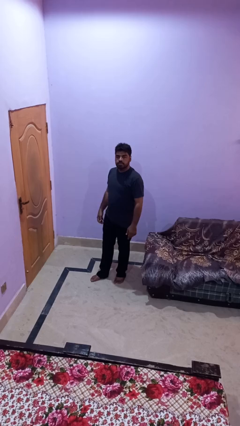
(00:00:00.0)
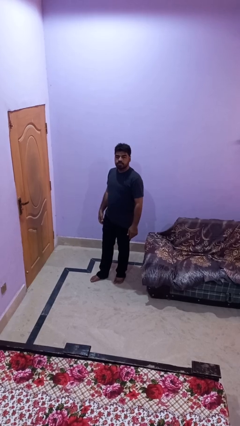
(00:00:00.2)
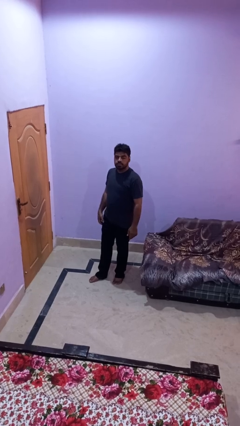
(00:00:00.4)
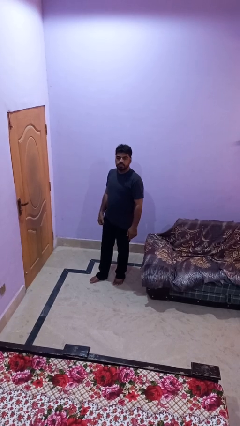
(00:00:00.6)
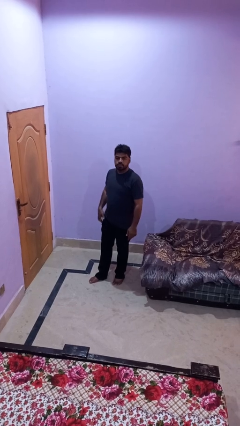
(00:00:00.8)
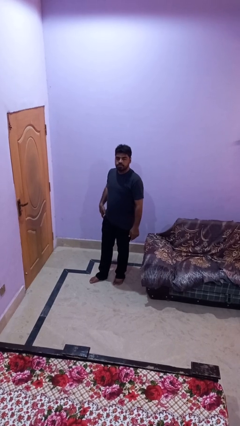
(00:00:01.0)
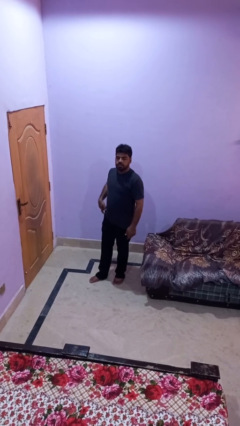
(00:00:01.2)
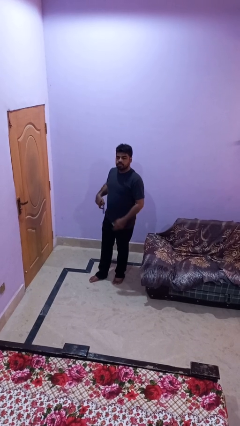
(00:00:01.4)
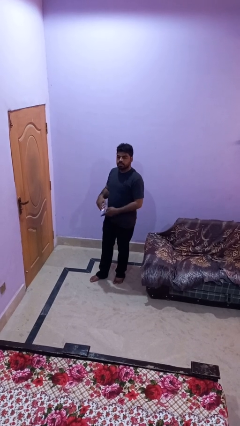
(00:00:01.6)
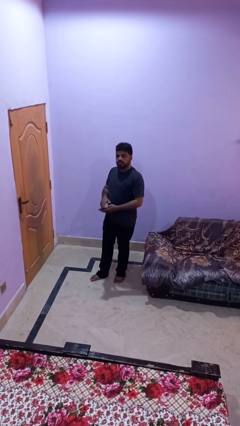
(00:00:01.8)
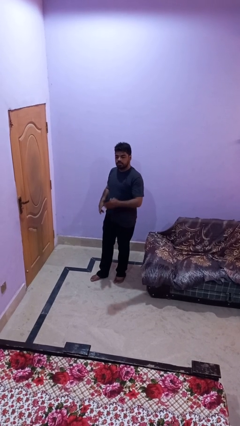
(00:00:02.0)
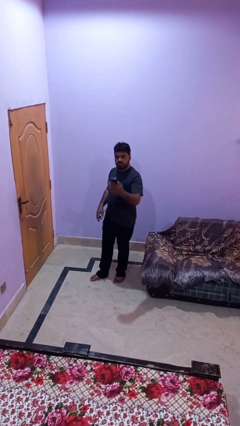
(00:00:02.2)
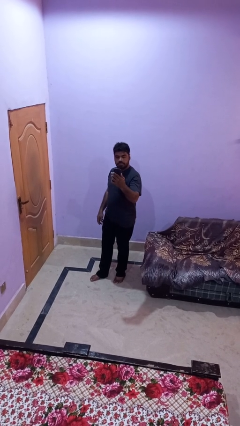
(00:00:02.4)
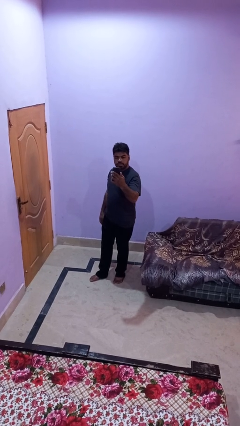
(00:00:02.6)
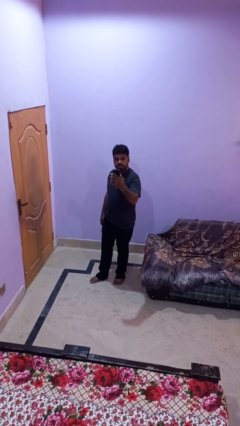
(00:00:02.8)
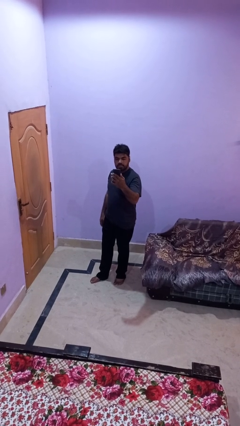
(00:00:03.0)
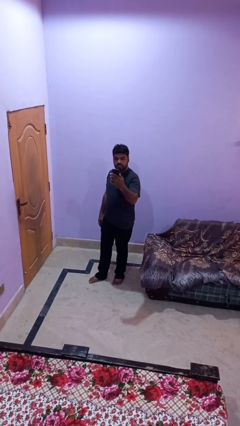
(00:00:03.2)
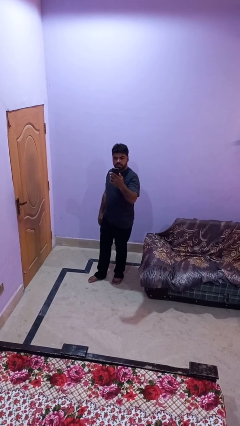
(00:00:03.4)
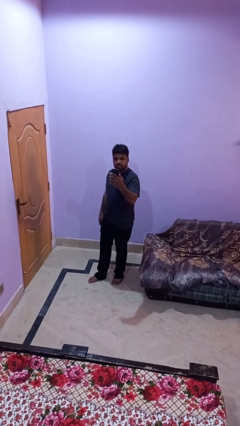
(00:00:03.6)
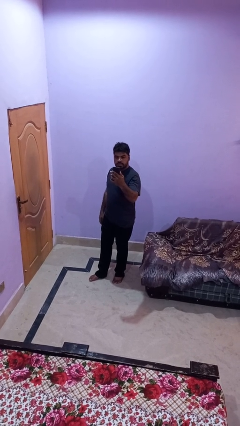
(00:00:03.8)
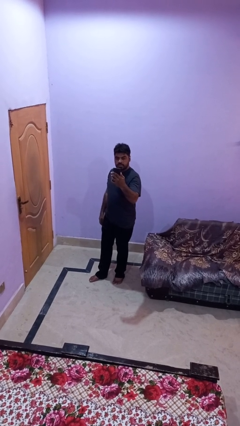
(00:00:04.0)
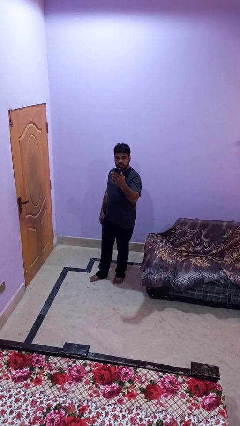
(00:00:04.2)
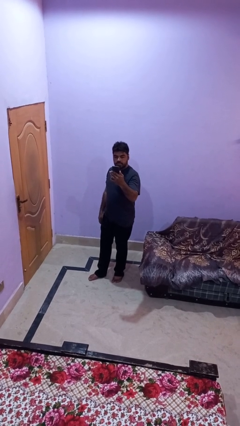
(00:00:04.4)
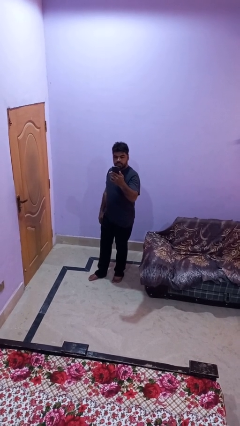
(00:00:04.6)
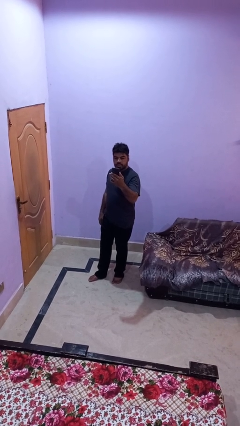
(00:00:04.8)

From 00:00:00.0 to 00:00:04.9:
person takes phone from pocket

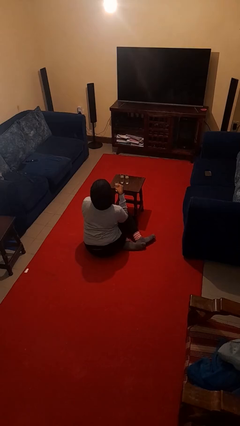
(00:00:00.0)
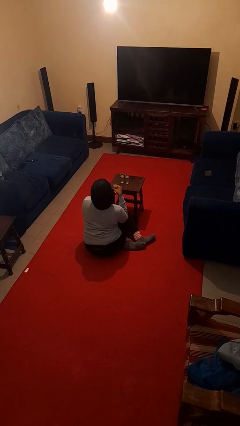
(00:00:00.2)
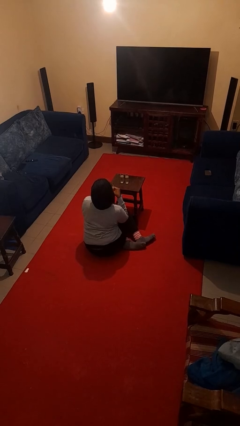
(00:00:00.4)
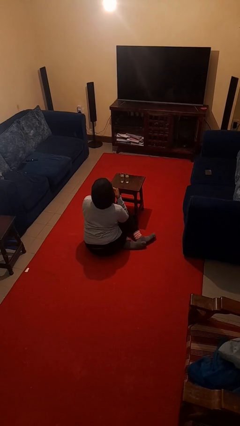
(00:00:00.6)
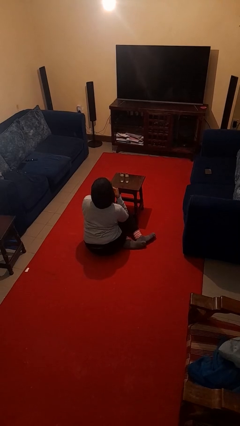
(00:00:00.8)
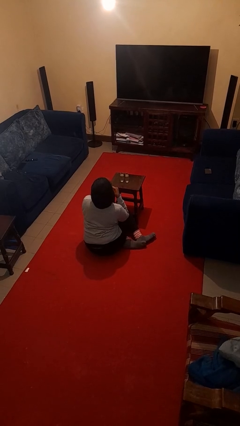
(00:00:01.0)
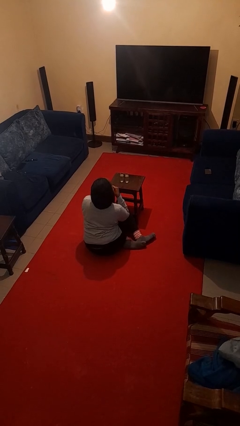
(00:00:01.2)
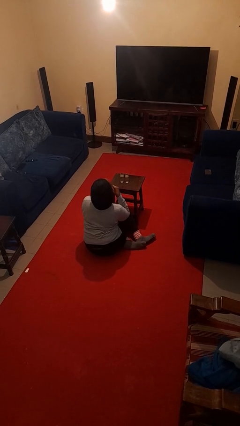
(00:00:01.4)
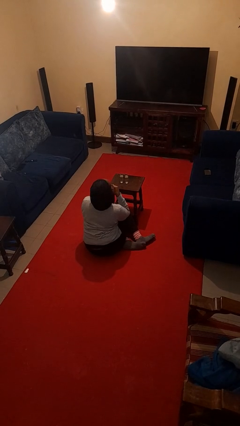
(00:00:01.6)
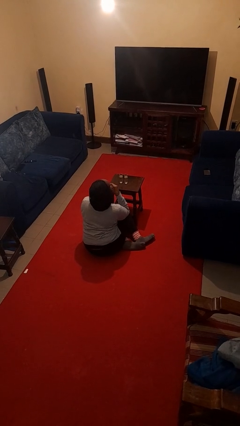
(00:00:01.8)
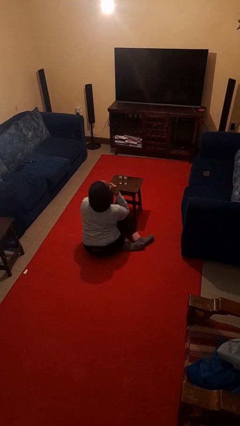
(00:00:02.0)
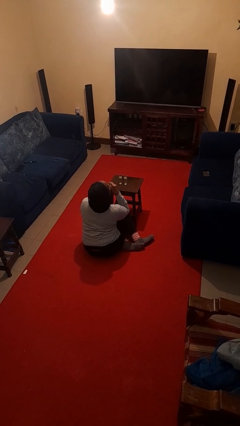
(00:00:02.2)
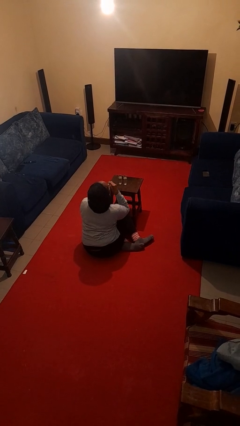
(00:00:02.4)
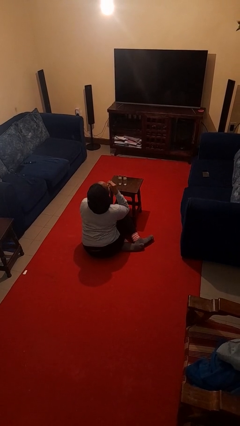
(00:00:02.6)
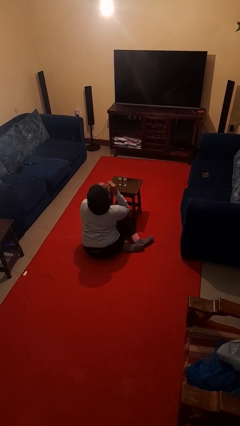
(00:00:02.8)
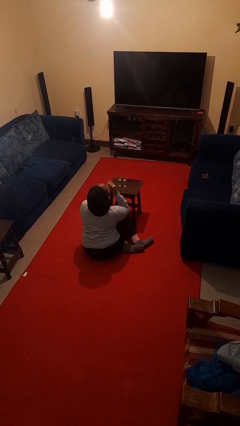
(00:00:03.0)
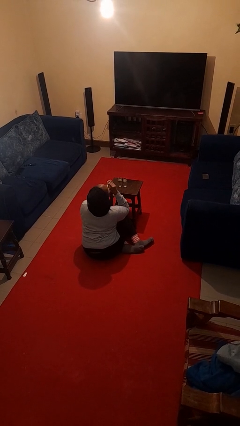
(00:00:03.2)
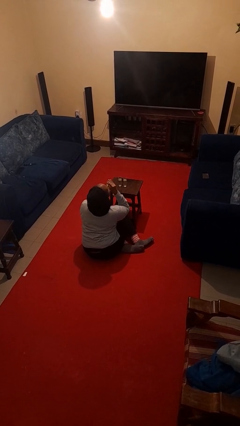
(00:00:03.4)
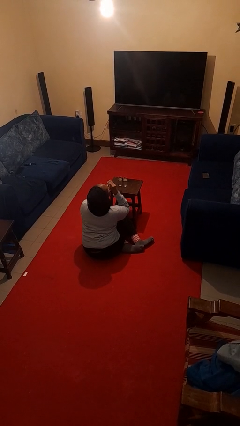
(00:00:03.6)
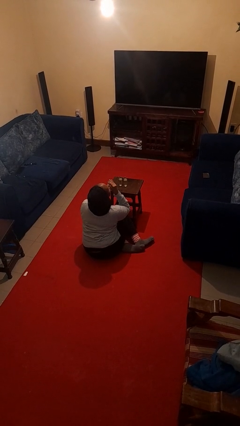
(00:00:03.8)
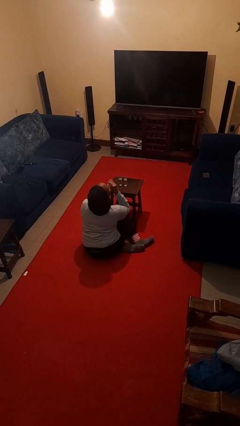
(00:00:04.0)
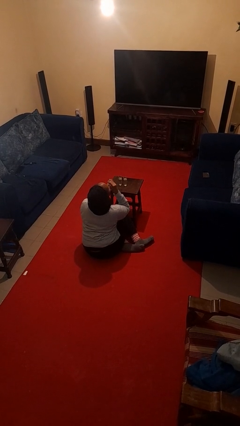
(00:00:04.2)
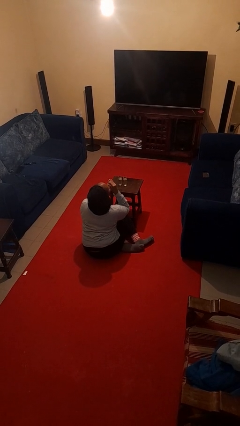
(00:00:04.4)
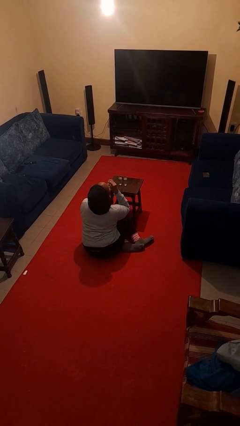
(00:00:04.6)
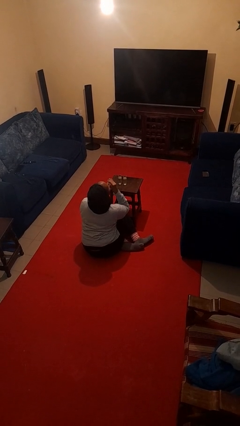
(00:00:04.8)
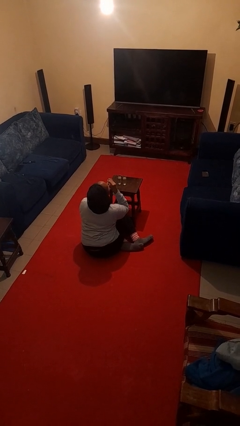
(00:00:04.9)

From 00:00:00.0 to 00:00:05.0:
person drinks from shotglass

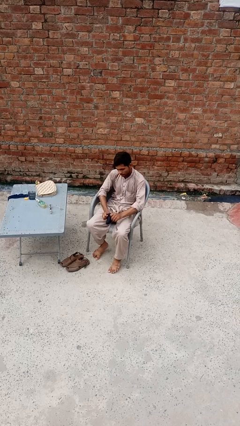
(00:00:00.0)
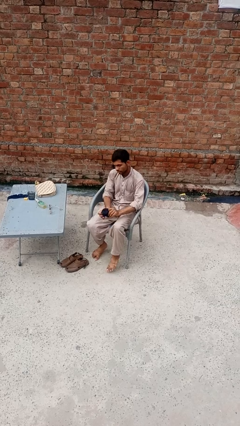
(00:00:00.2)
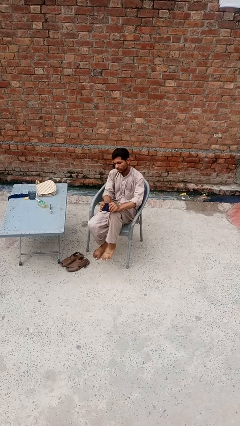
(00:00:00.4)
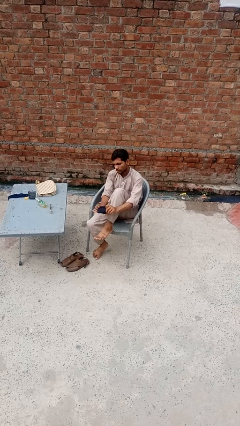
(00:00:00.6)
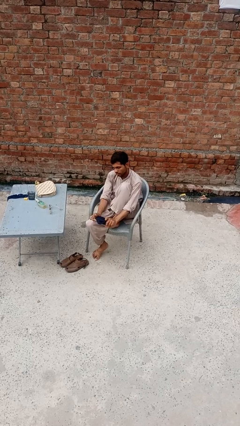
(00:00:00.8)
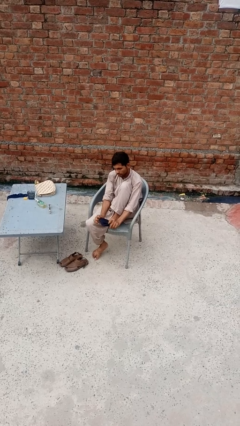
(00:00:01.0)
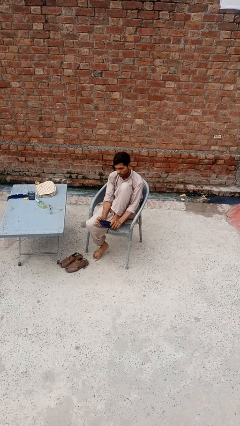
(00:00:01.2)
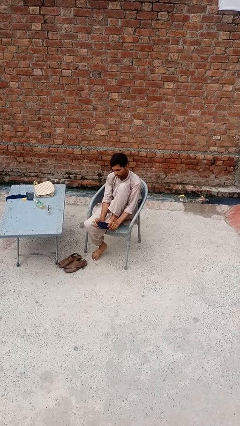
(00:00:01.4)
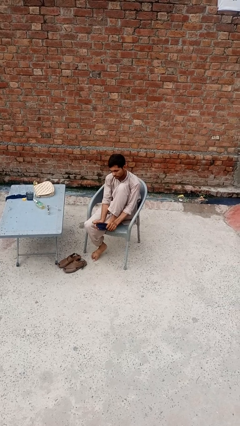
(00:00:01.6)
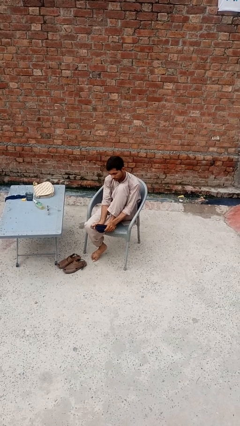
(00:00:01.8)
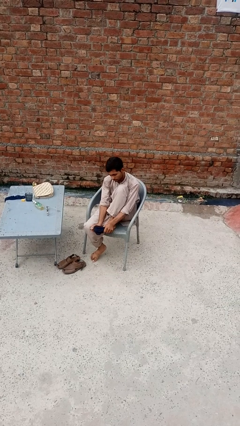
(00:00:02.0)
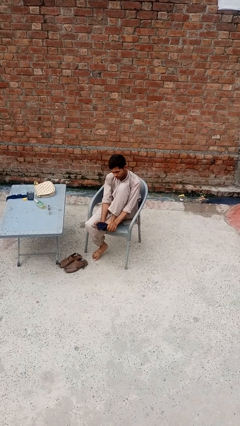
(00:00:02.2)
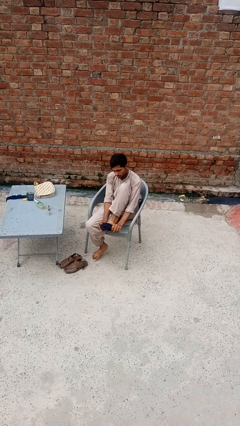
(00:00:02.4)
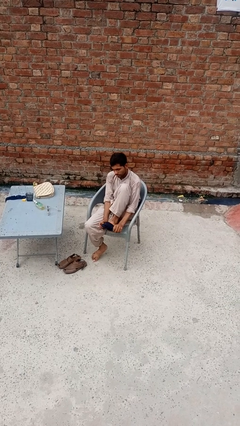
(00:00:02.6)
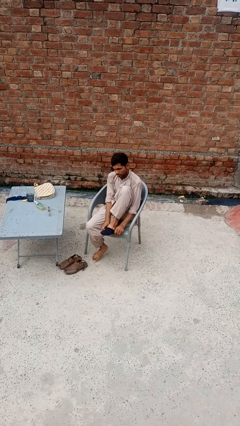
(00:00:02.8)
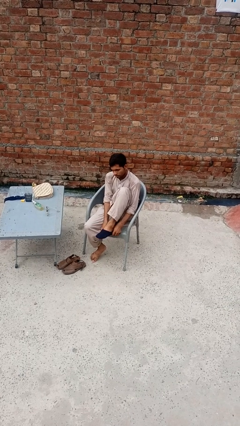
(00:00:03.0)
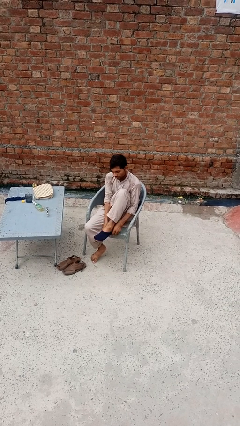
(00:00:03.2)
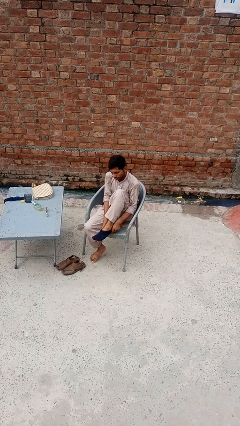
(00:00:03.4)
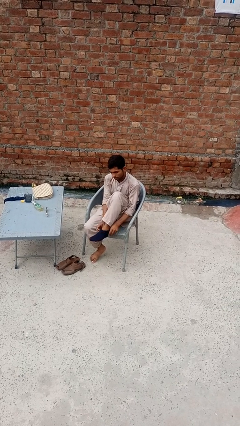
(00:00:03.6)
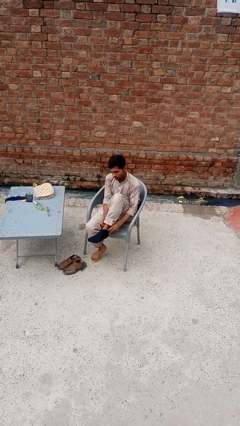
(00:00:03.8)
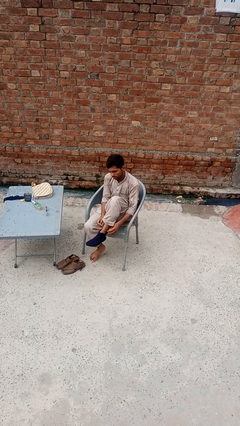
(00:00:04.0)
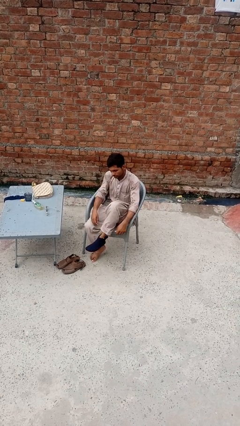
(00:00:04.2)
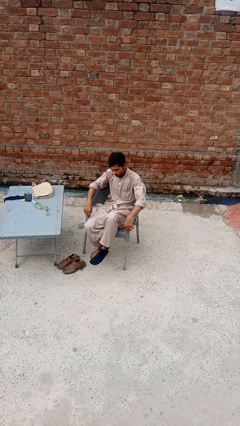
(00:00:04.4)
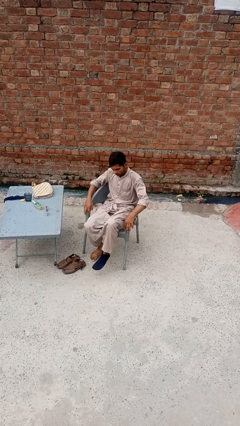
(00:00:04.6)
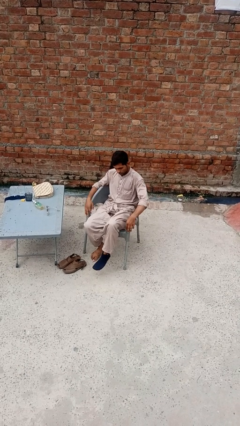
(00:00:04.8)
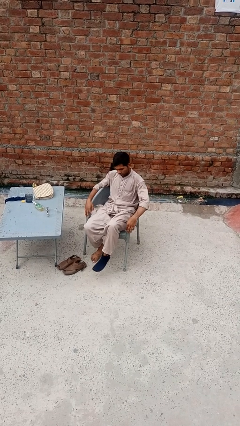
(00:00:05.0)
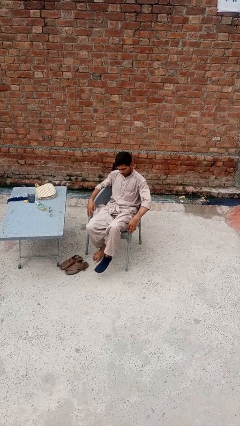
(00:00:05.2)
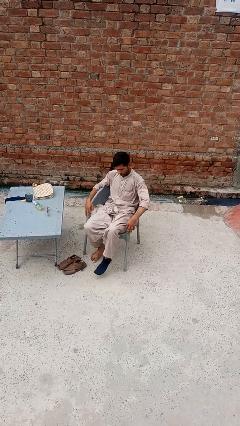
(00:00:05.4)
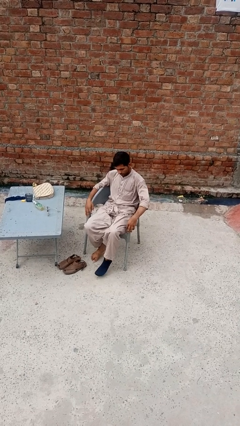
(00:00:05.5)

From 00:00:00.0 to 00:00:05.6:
person puts on socks

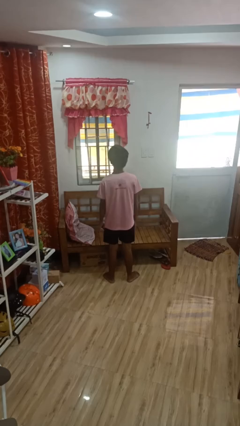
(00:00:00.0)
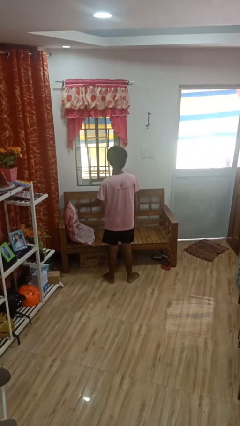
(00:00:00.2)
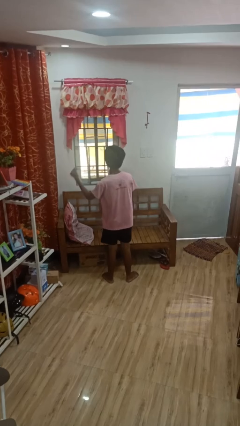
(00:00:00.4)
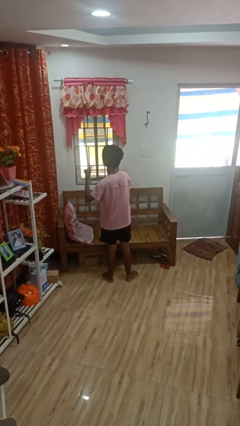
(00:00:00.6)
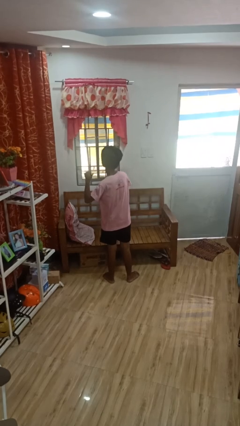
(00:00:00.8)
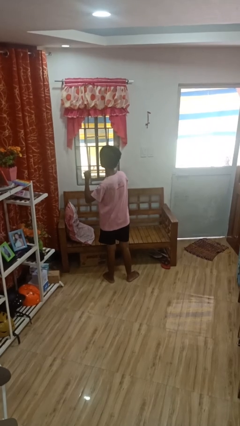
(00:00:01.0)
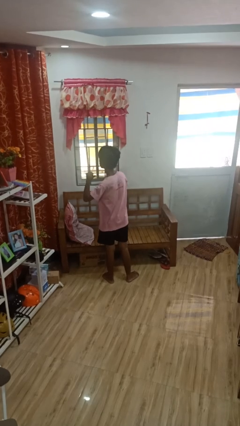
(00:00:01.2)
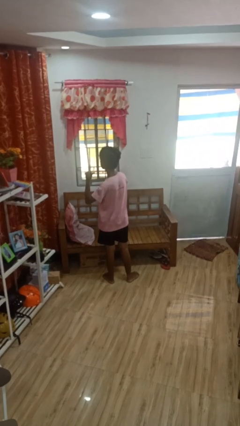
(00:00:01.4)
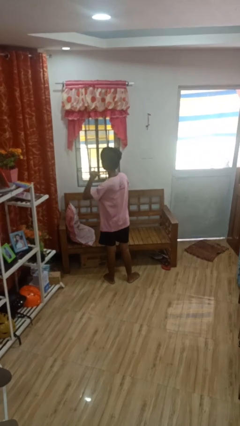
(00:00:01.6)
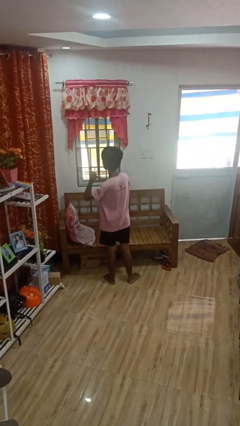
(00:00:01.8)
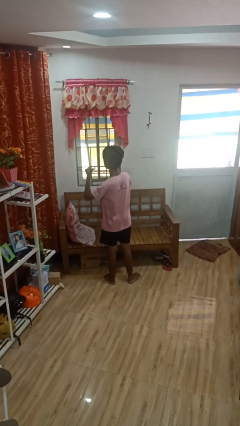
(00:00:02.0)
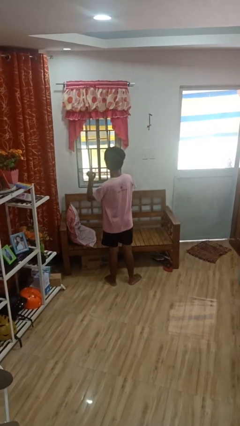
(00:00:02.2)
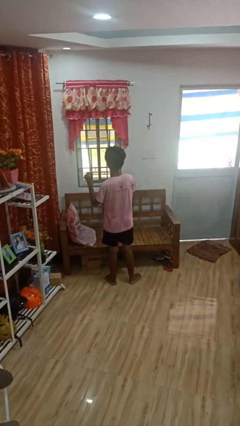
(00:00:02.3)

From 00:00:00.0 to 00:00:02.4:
person gestures behind me
